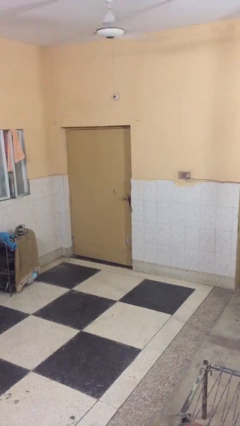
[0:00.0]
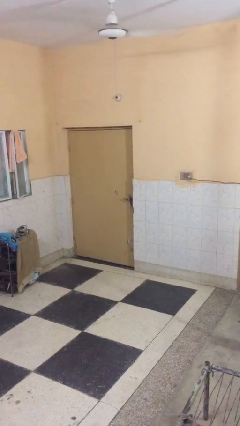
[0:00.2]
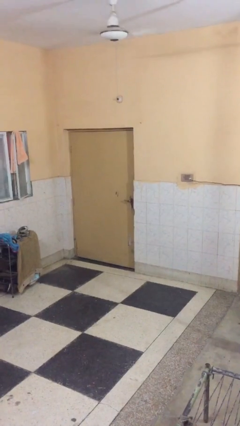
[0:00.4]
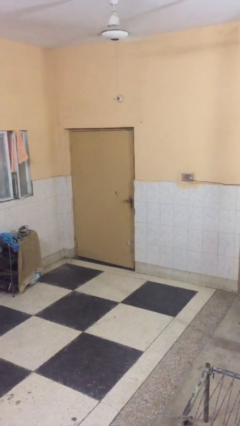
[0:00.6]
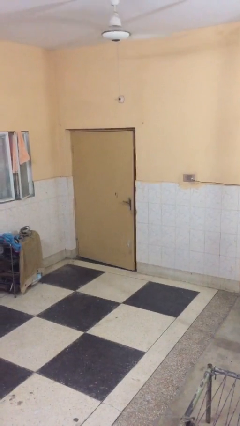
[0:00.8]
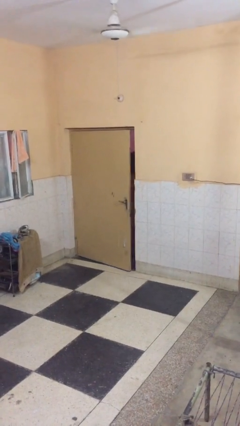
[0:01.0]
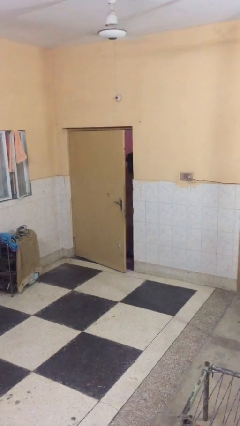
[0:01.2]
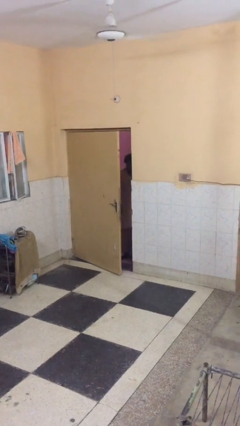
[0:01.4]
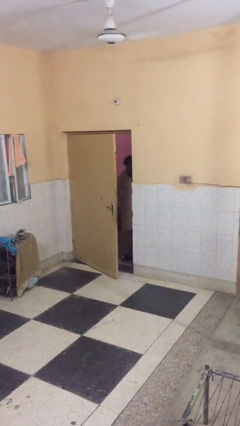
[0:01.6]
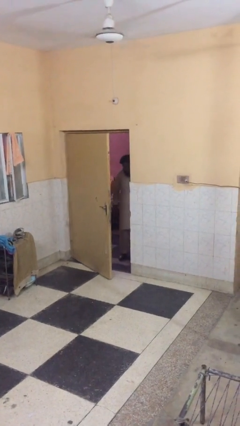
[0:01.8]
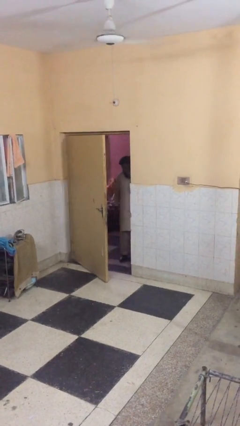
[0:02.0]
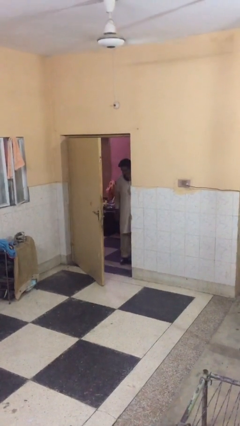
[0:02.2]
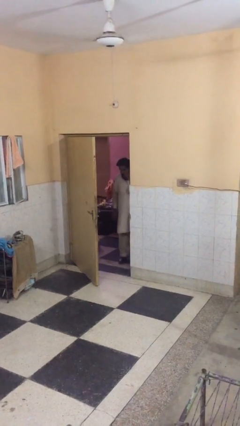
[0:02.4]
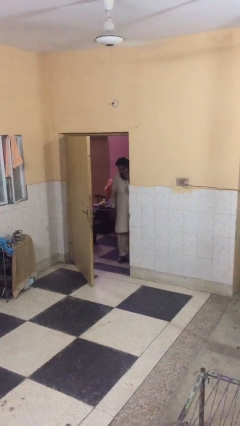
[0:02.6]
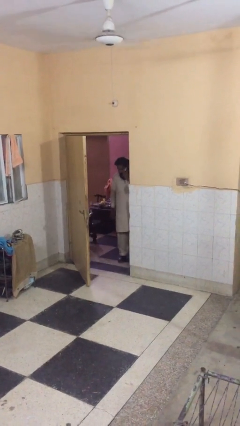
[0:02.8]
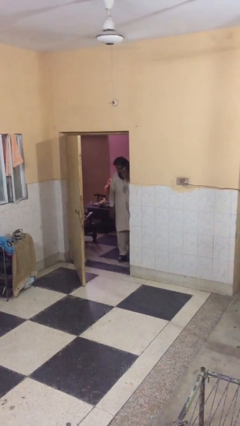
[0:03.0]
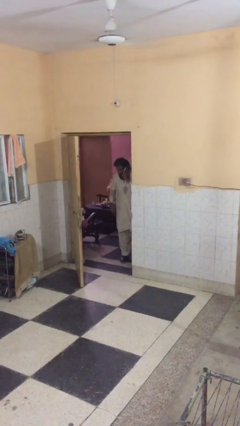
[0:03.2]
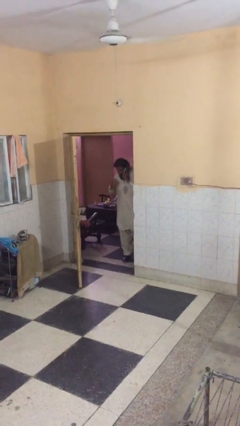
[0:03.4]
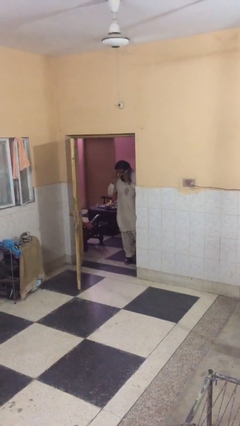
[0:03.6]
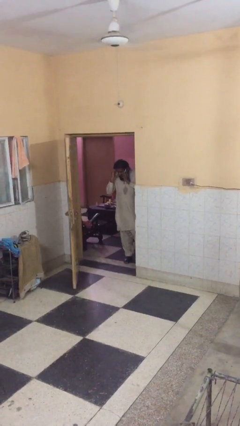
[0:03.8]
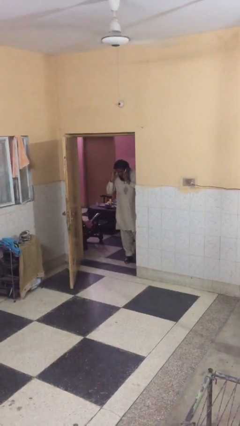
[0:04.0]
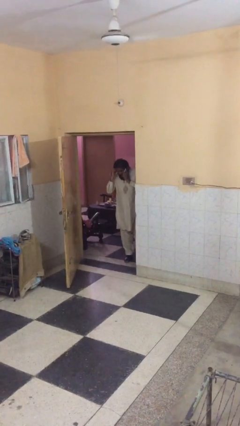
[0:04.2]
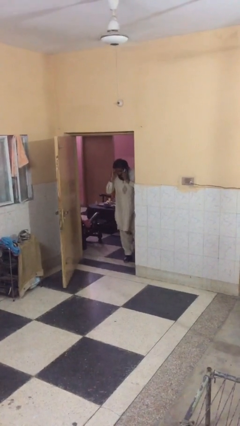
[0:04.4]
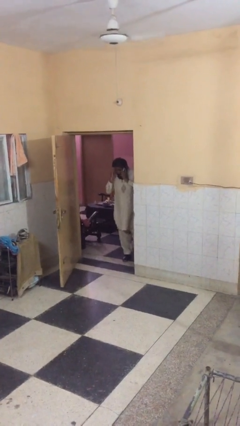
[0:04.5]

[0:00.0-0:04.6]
person opens facility door

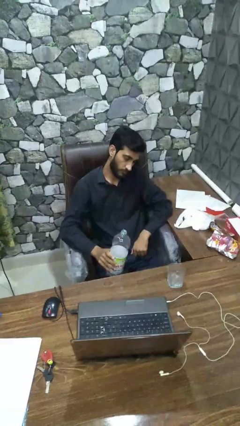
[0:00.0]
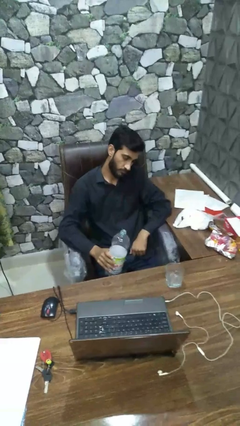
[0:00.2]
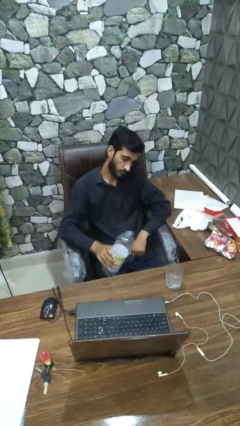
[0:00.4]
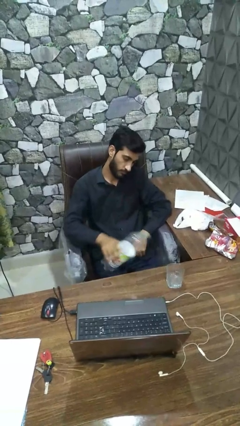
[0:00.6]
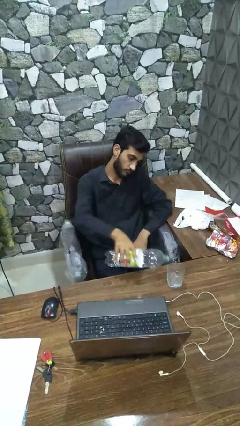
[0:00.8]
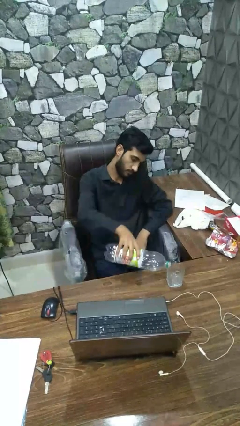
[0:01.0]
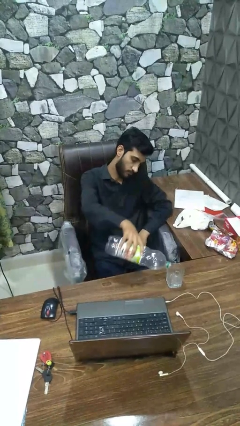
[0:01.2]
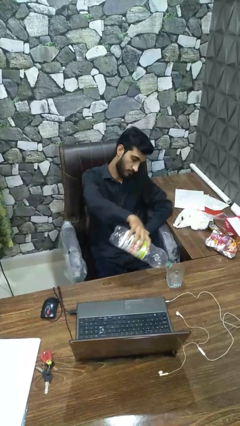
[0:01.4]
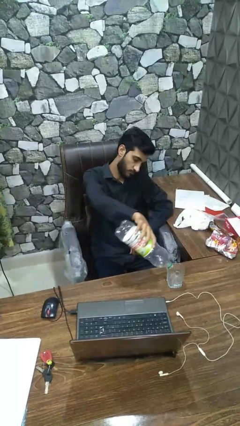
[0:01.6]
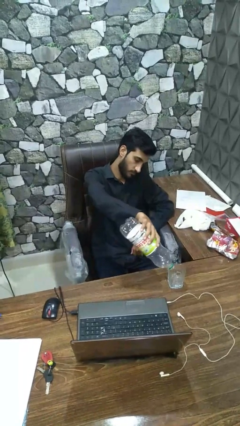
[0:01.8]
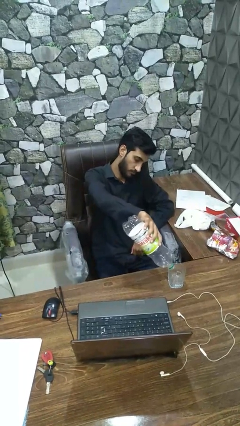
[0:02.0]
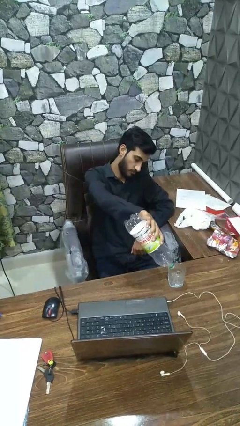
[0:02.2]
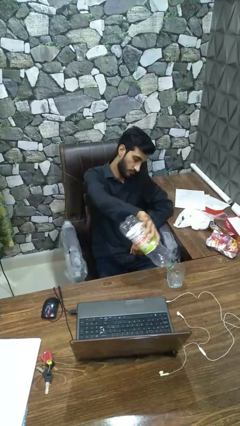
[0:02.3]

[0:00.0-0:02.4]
person pours liquid into cup

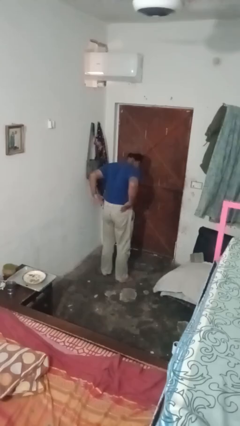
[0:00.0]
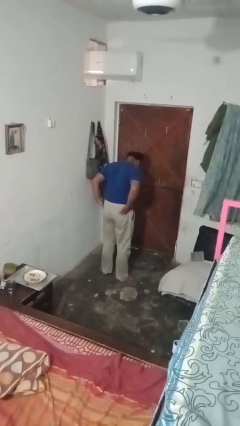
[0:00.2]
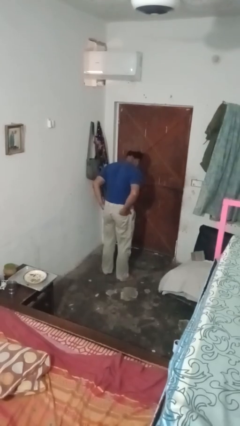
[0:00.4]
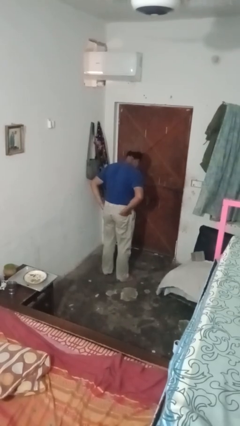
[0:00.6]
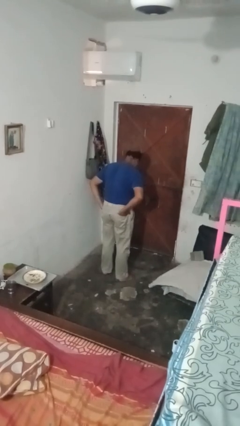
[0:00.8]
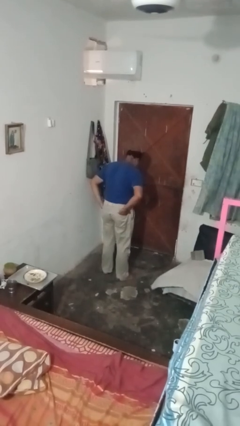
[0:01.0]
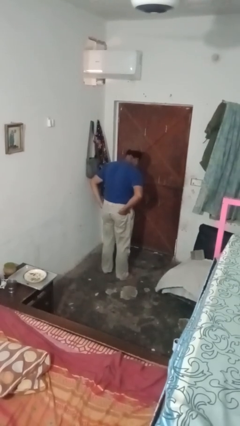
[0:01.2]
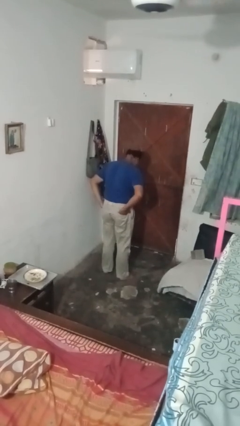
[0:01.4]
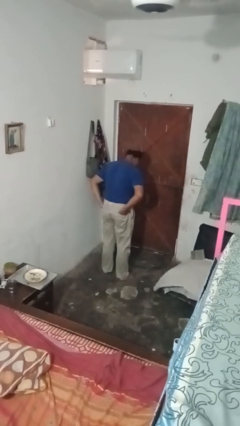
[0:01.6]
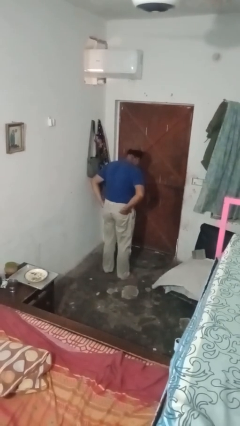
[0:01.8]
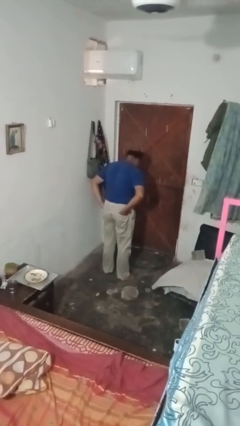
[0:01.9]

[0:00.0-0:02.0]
person puts hands in back pockets

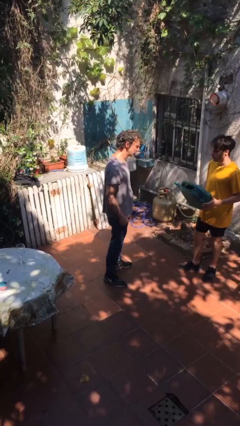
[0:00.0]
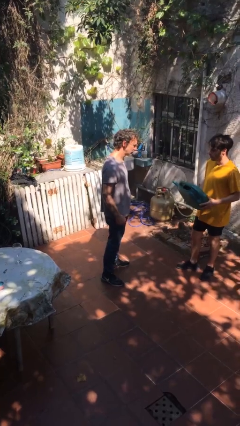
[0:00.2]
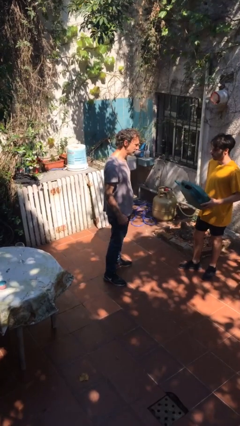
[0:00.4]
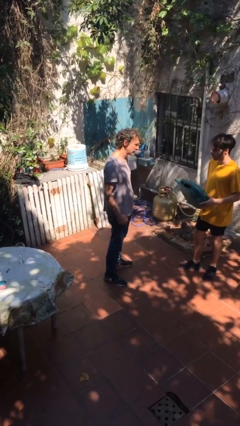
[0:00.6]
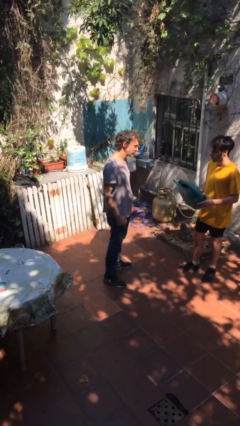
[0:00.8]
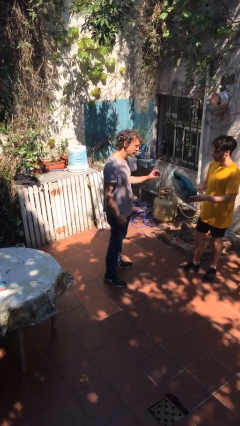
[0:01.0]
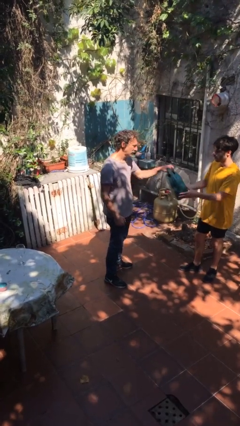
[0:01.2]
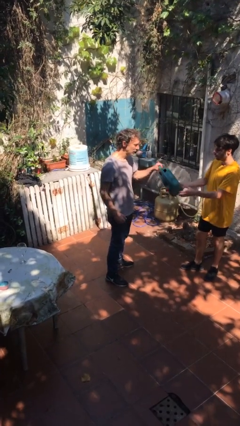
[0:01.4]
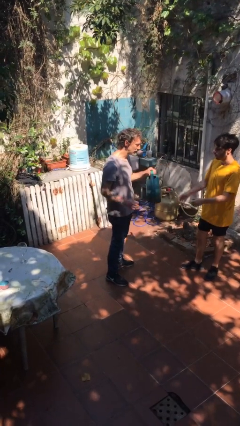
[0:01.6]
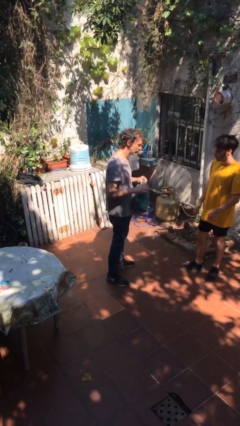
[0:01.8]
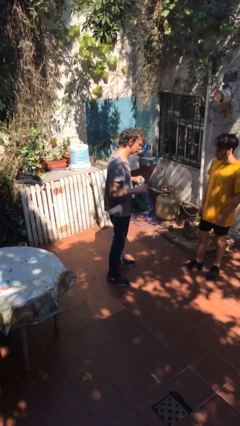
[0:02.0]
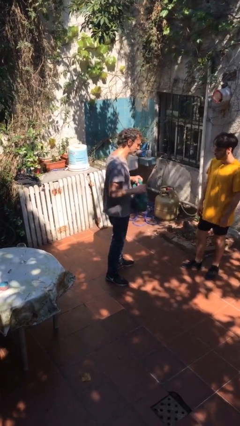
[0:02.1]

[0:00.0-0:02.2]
person transfers object to person

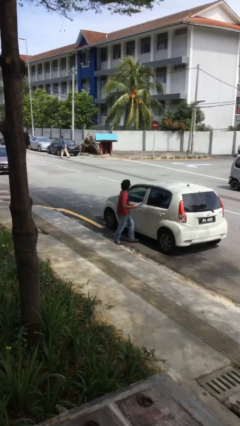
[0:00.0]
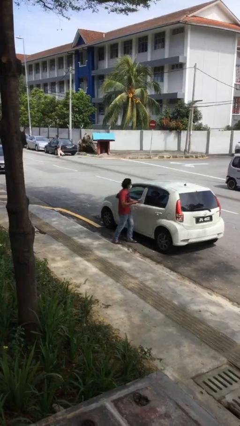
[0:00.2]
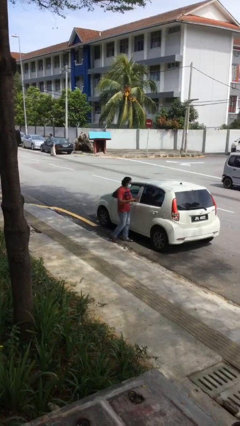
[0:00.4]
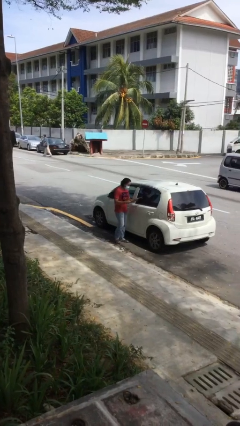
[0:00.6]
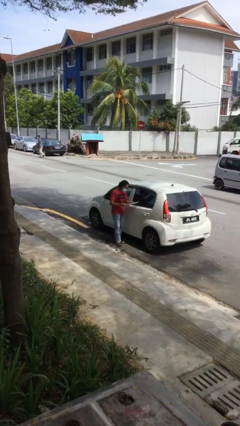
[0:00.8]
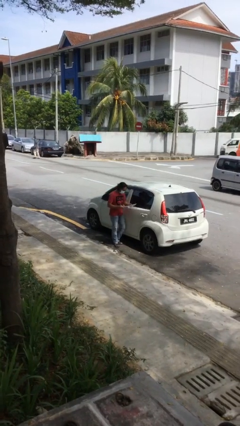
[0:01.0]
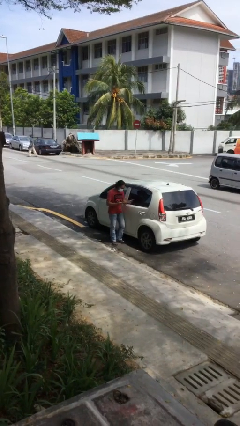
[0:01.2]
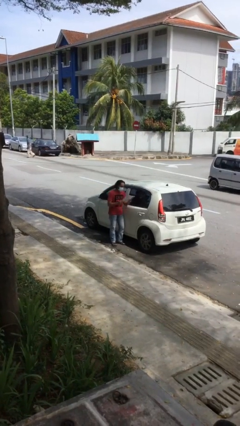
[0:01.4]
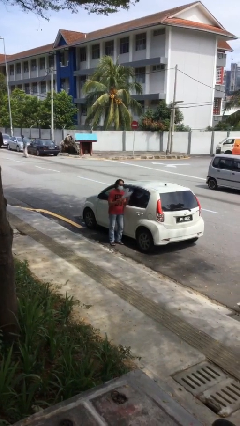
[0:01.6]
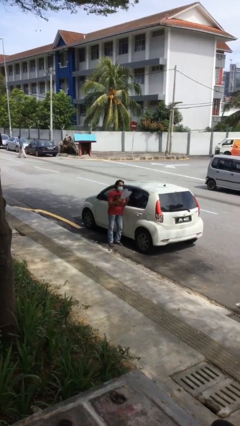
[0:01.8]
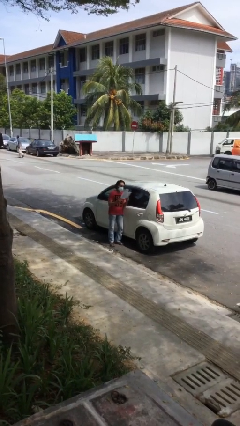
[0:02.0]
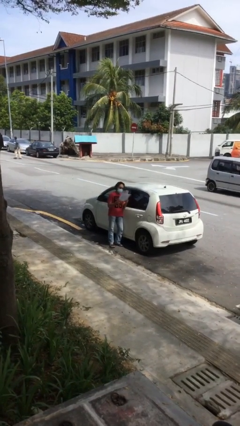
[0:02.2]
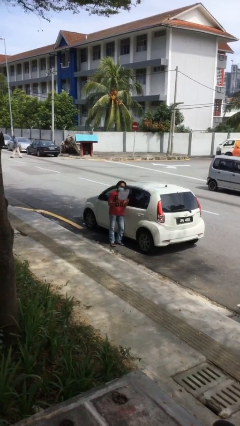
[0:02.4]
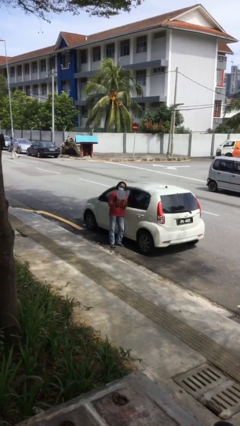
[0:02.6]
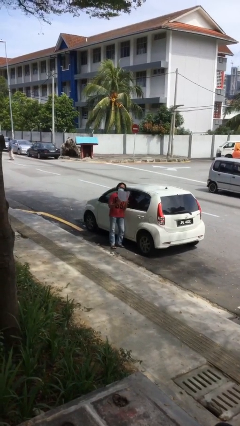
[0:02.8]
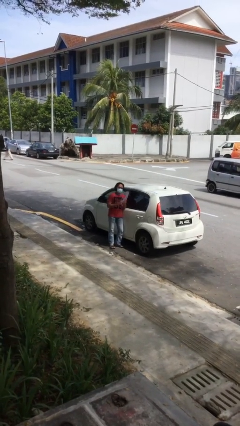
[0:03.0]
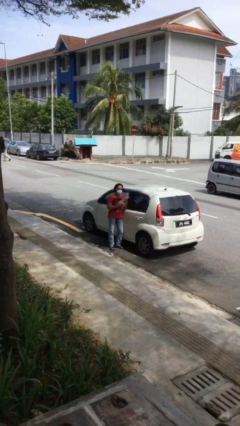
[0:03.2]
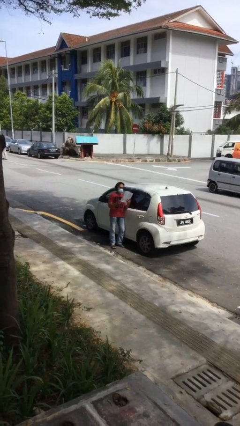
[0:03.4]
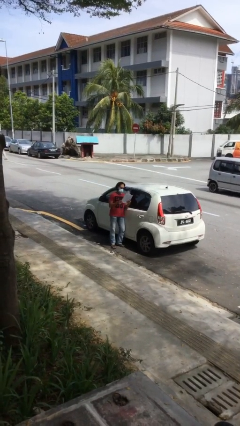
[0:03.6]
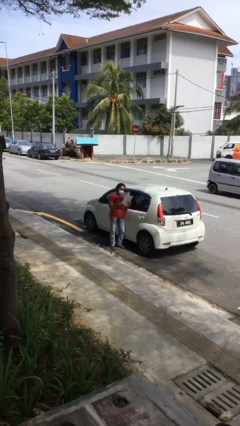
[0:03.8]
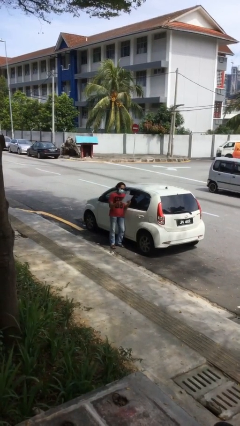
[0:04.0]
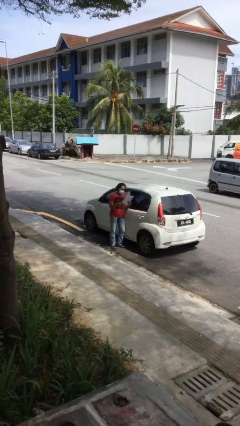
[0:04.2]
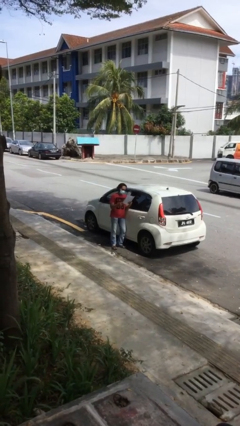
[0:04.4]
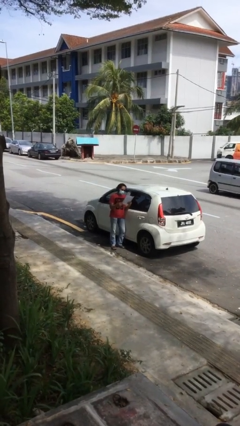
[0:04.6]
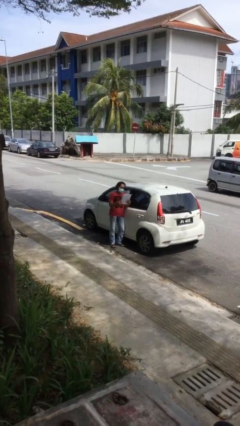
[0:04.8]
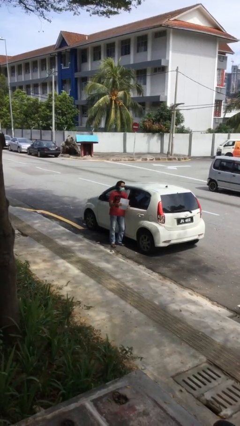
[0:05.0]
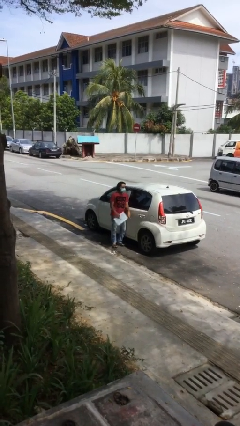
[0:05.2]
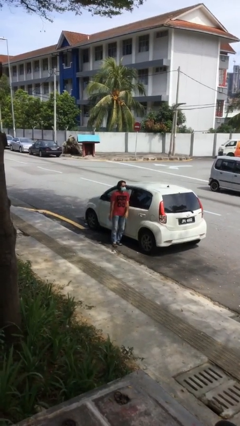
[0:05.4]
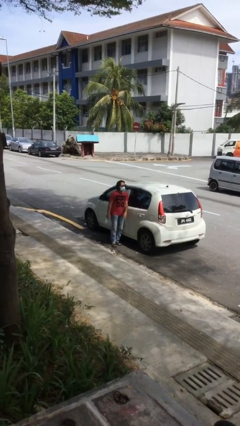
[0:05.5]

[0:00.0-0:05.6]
person reads document

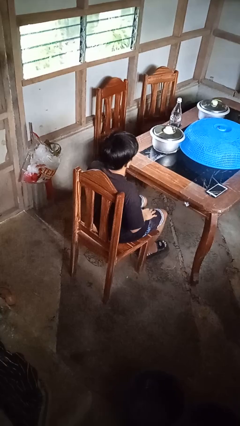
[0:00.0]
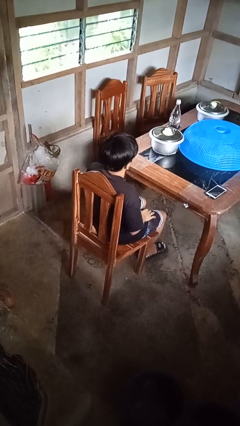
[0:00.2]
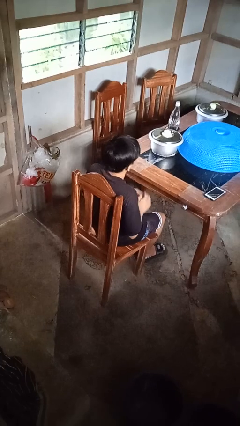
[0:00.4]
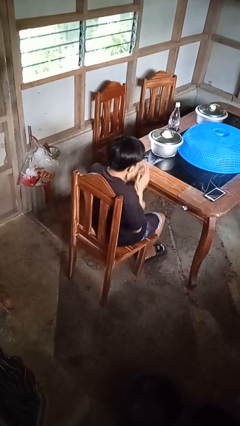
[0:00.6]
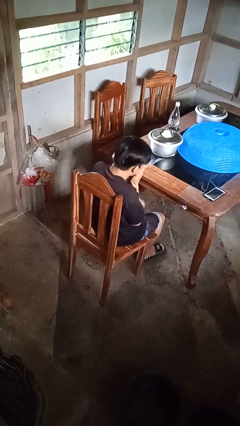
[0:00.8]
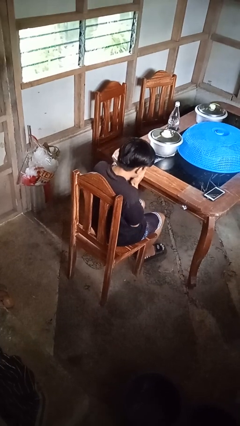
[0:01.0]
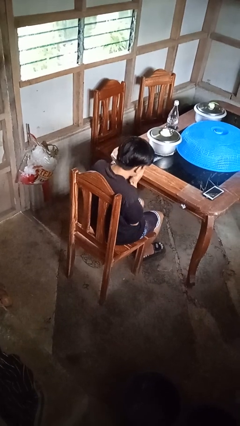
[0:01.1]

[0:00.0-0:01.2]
person sneezes into hand
